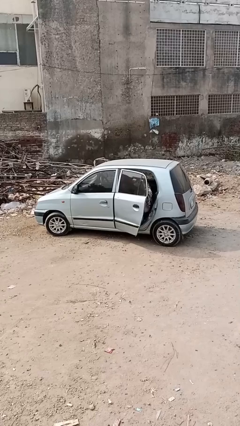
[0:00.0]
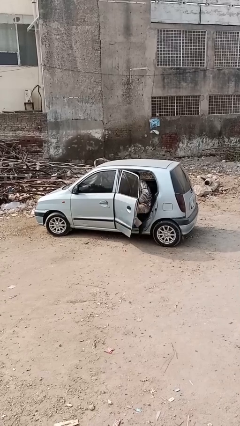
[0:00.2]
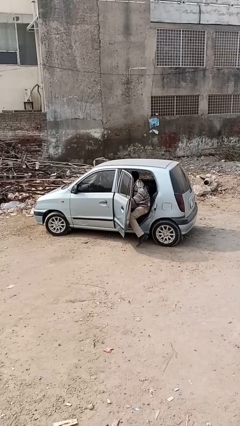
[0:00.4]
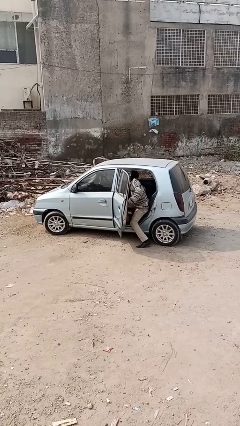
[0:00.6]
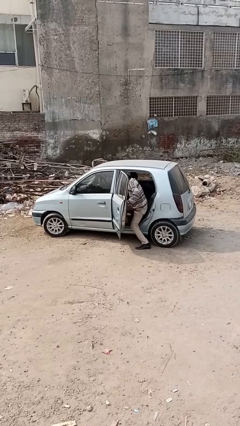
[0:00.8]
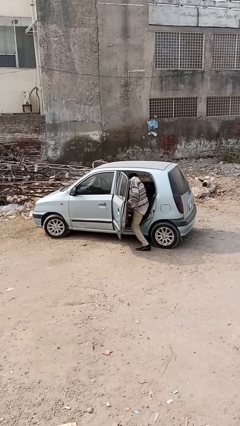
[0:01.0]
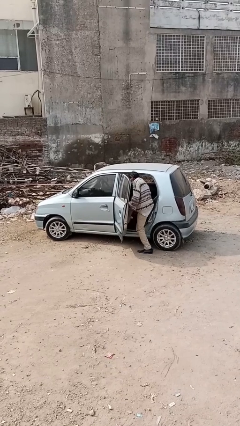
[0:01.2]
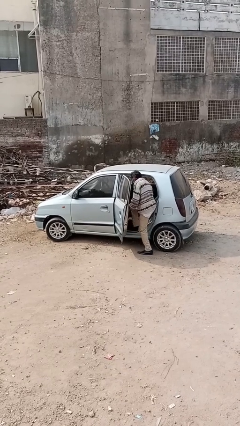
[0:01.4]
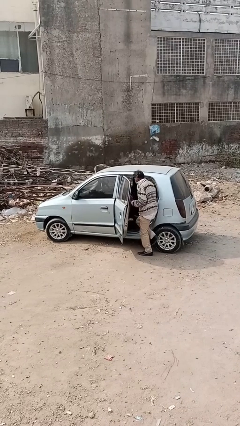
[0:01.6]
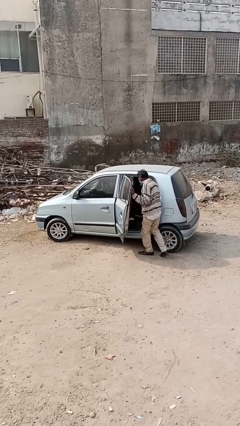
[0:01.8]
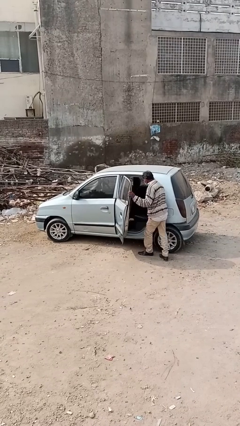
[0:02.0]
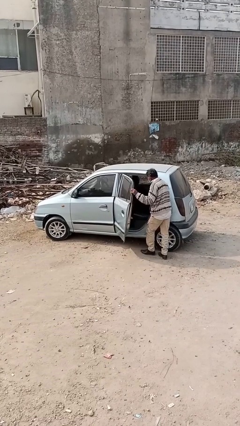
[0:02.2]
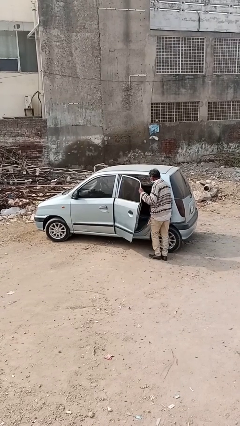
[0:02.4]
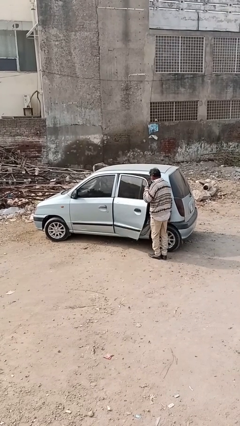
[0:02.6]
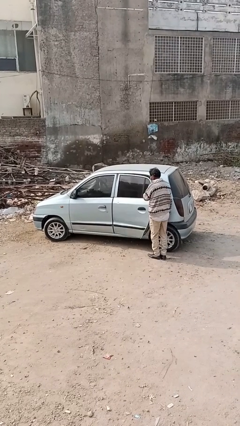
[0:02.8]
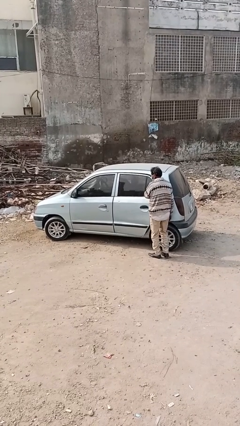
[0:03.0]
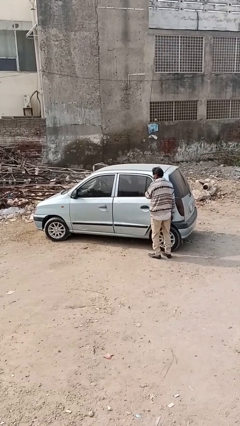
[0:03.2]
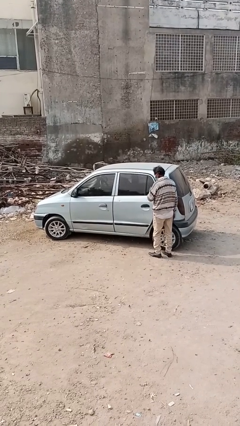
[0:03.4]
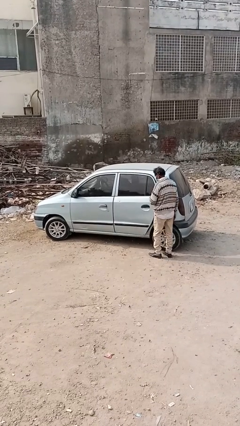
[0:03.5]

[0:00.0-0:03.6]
car drops off person

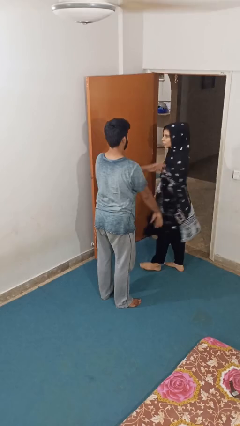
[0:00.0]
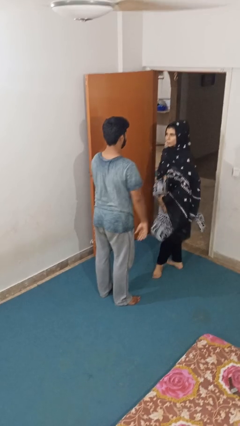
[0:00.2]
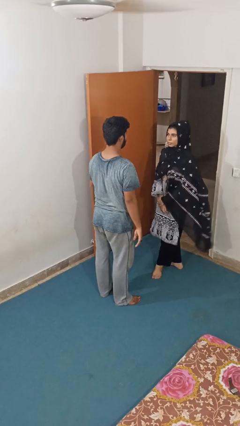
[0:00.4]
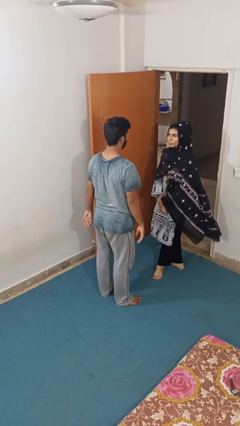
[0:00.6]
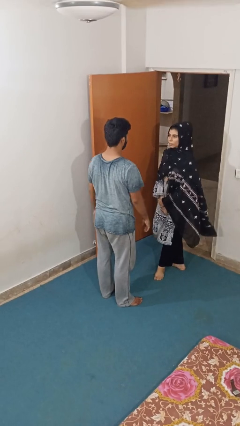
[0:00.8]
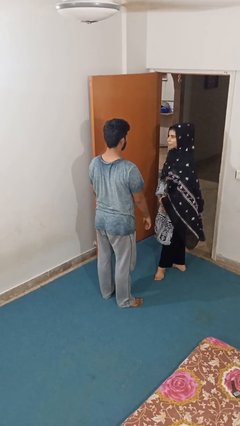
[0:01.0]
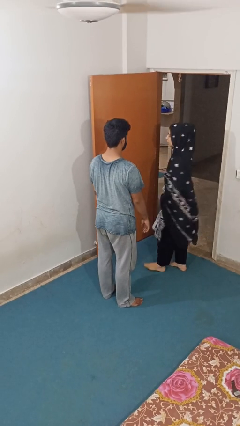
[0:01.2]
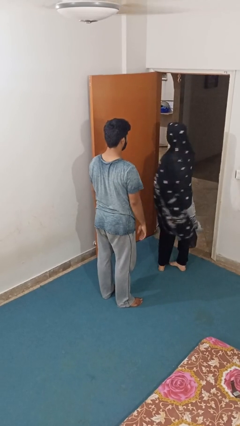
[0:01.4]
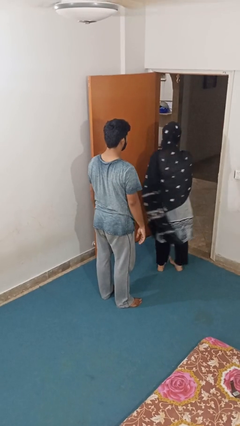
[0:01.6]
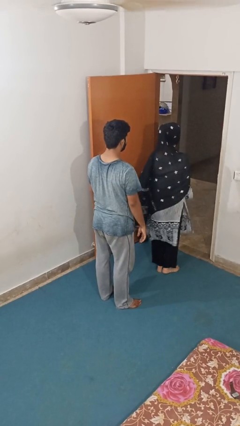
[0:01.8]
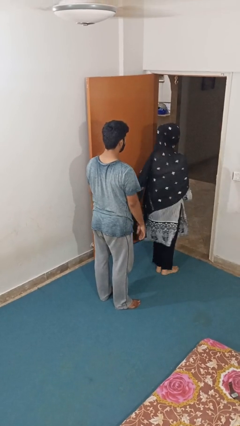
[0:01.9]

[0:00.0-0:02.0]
person spins person around

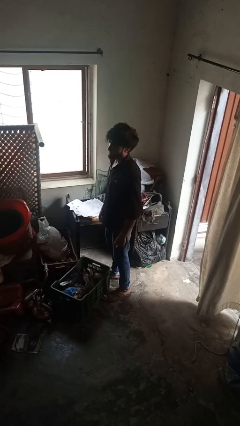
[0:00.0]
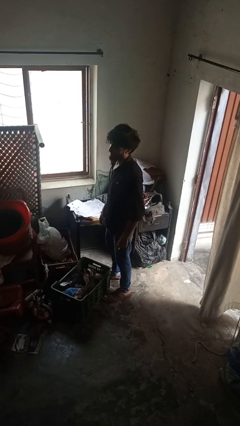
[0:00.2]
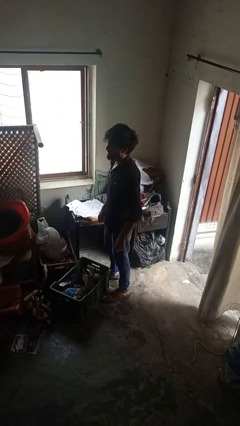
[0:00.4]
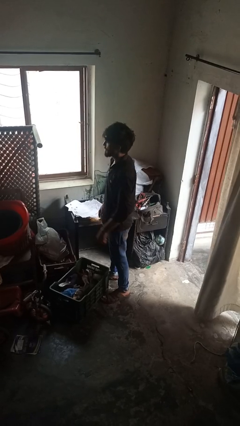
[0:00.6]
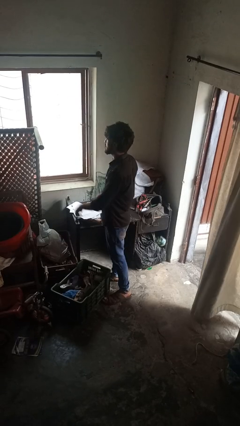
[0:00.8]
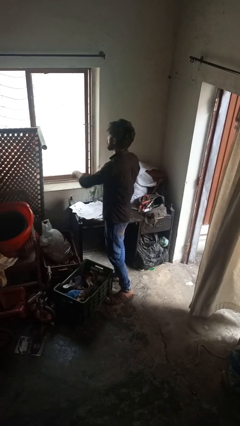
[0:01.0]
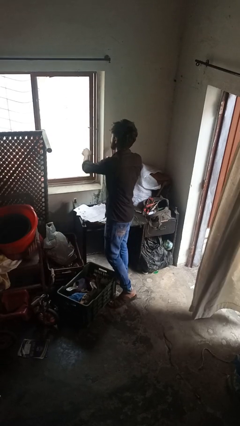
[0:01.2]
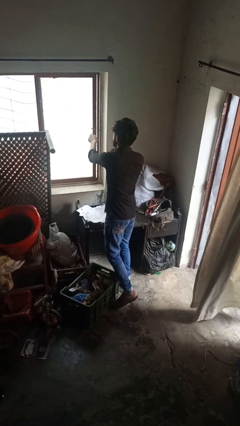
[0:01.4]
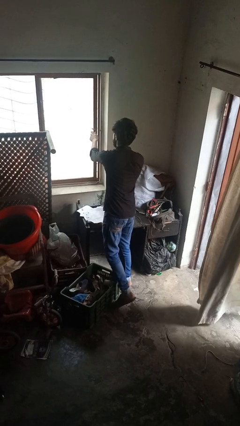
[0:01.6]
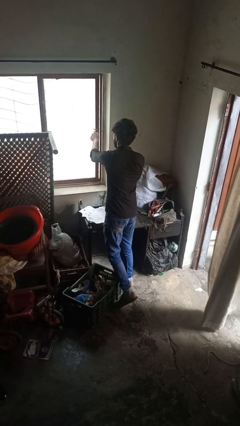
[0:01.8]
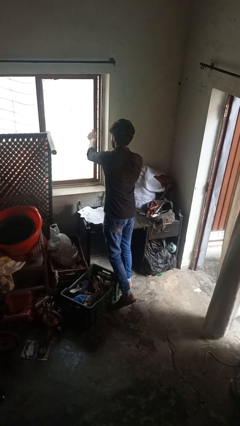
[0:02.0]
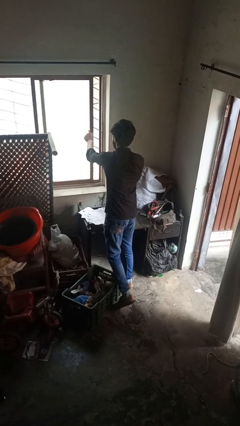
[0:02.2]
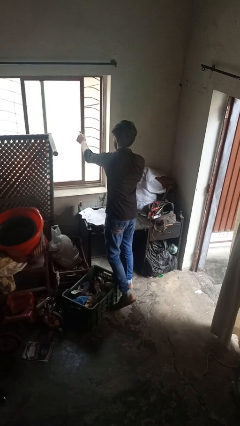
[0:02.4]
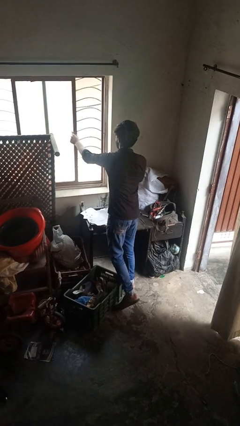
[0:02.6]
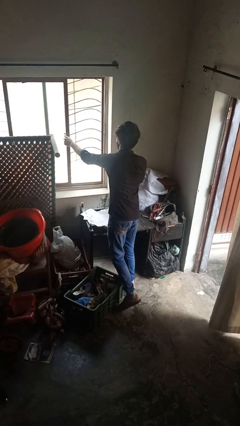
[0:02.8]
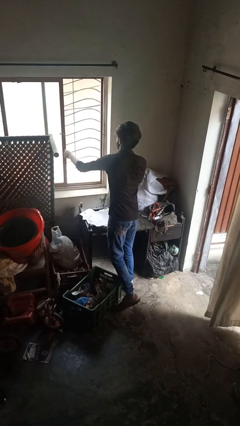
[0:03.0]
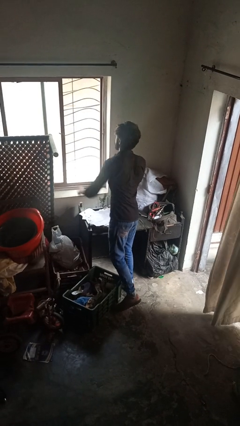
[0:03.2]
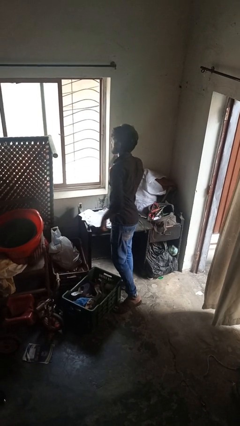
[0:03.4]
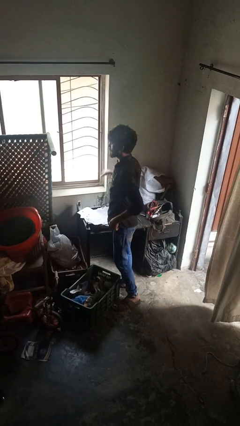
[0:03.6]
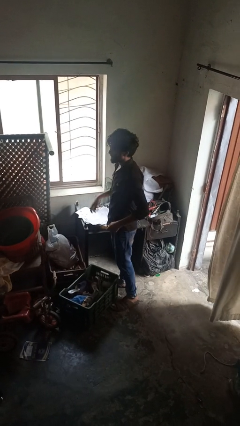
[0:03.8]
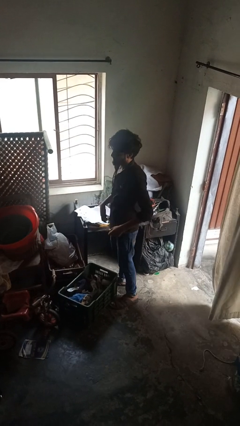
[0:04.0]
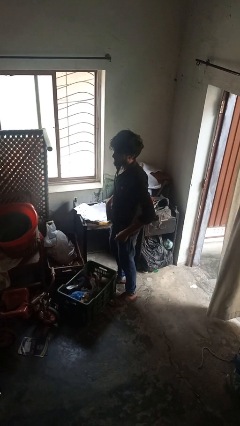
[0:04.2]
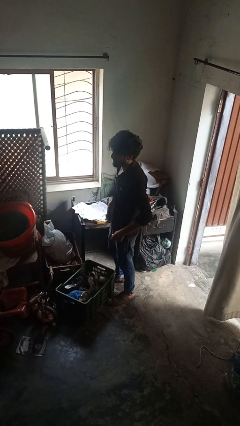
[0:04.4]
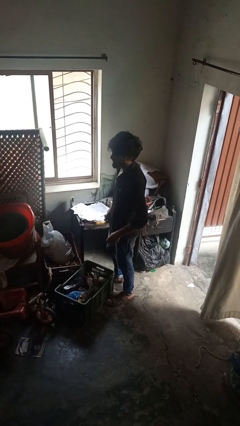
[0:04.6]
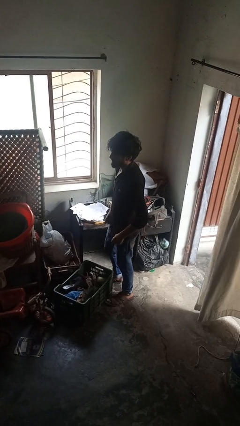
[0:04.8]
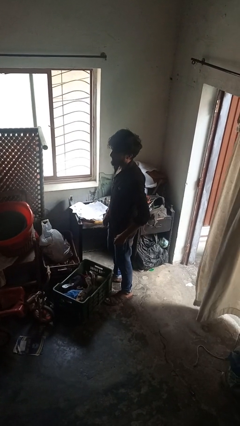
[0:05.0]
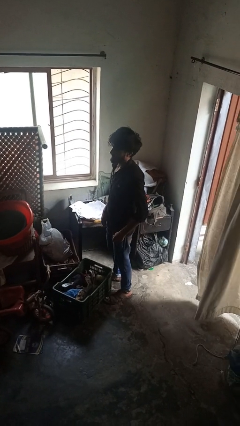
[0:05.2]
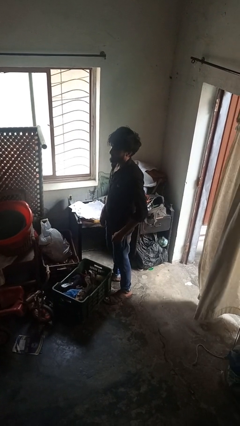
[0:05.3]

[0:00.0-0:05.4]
person opens home window

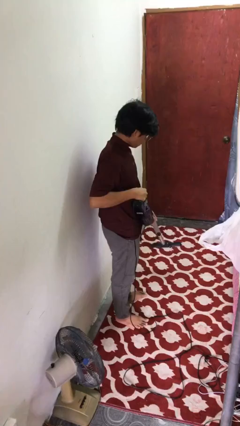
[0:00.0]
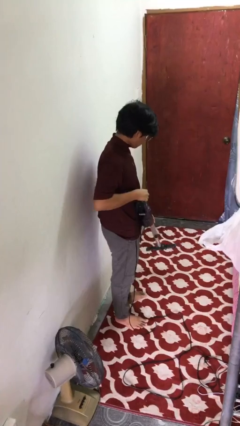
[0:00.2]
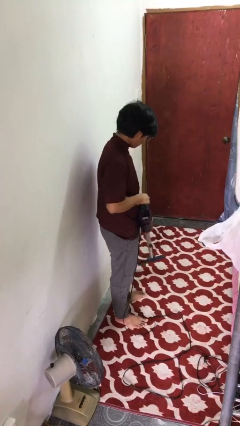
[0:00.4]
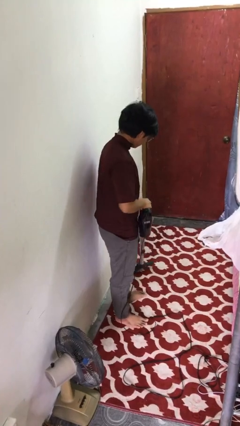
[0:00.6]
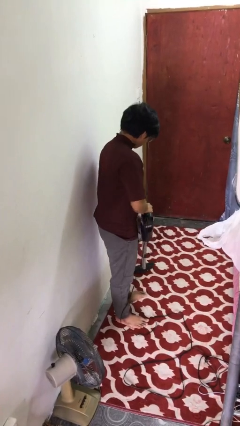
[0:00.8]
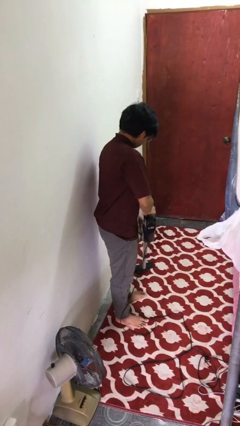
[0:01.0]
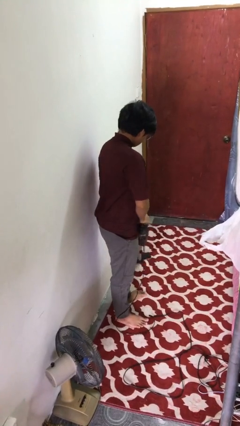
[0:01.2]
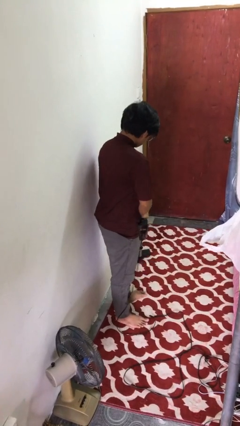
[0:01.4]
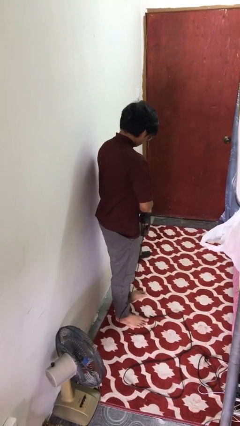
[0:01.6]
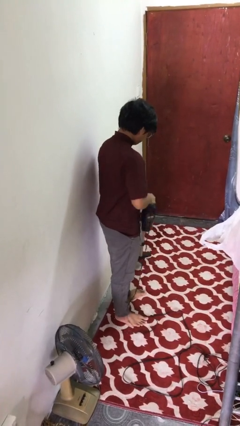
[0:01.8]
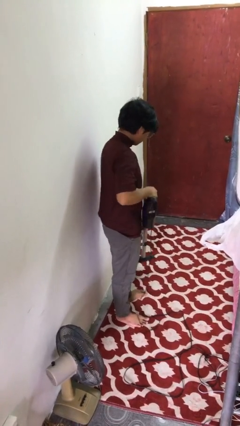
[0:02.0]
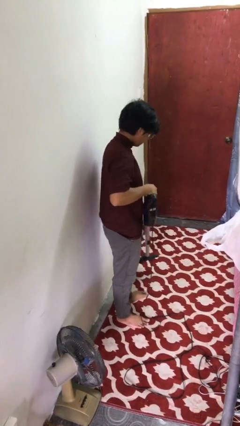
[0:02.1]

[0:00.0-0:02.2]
person vacuums carpet

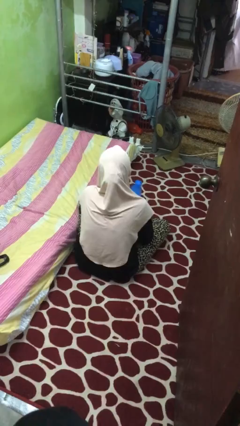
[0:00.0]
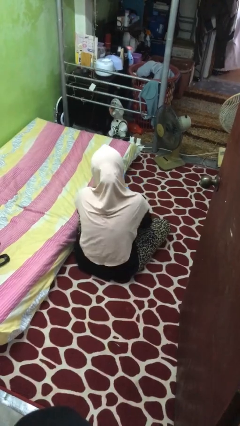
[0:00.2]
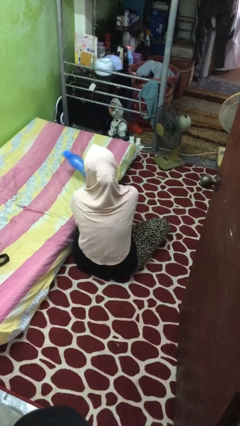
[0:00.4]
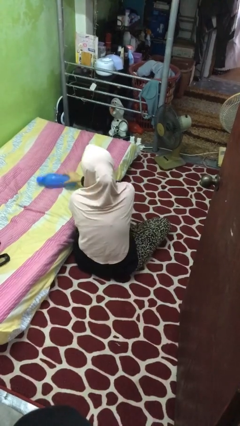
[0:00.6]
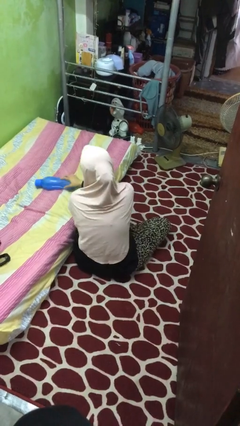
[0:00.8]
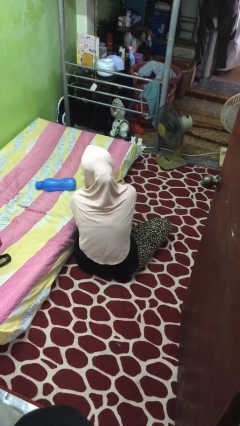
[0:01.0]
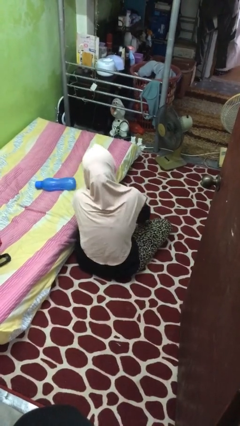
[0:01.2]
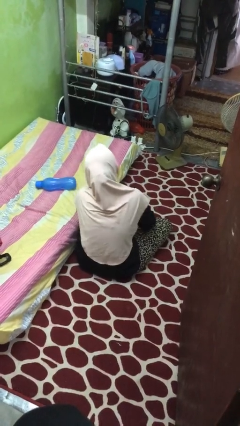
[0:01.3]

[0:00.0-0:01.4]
person puts down object on bed

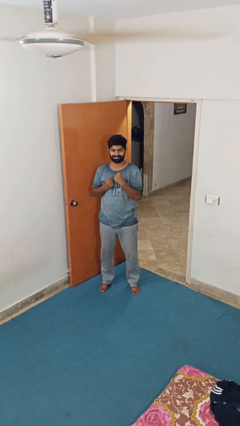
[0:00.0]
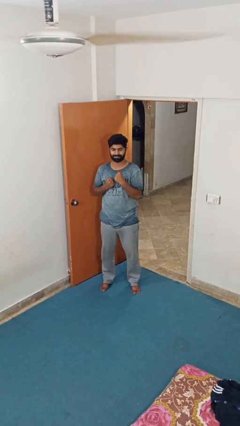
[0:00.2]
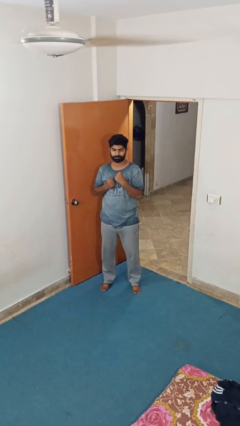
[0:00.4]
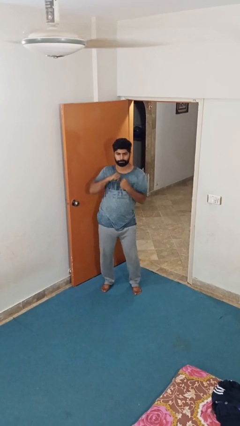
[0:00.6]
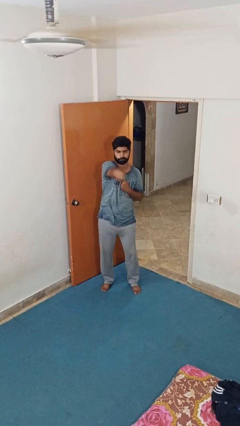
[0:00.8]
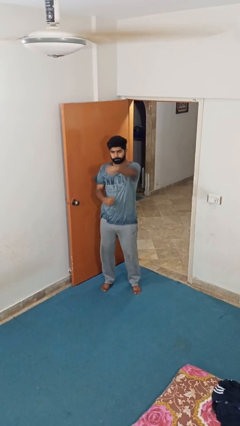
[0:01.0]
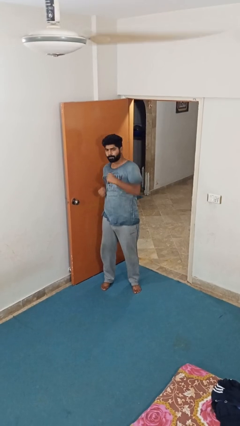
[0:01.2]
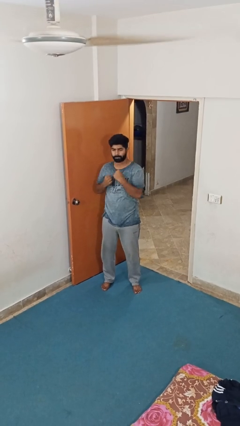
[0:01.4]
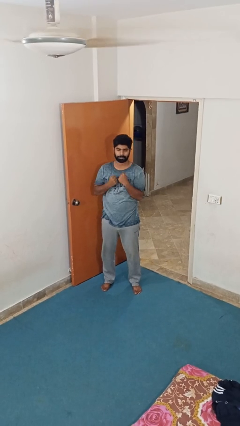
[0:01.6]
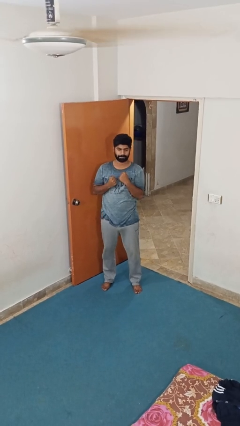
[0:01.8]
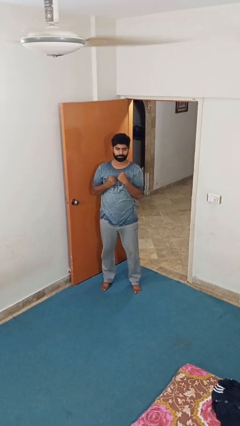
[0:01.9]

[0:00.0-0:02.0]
person punches

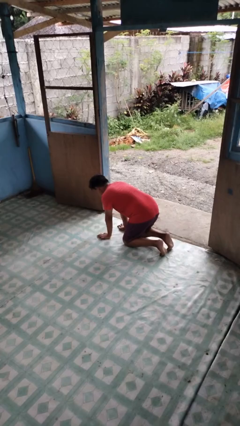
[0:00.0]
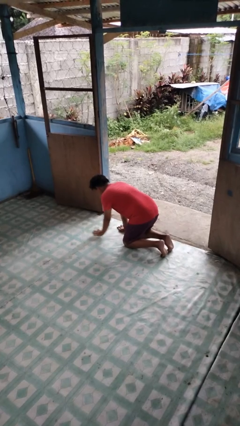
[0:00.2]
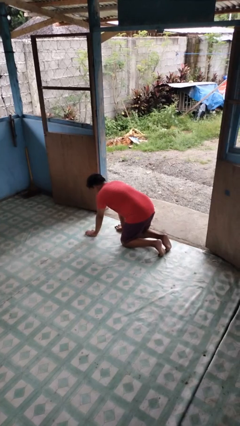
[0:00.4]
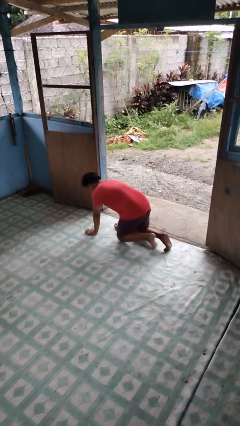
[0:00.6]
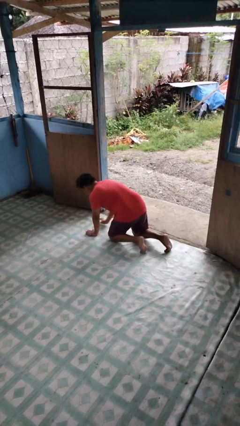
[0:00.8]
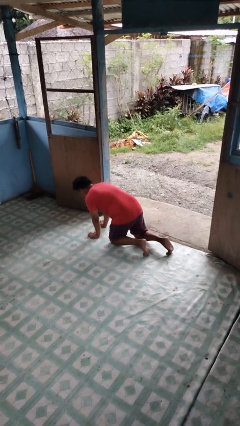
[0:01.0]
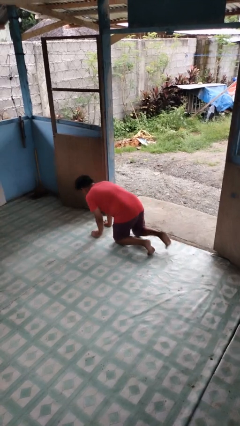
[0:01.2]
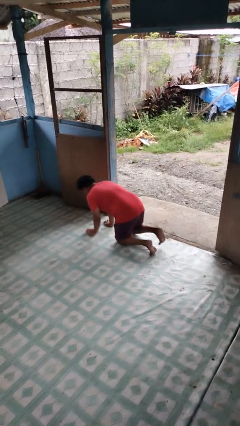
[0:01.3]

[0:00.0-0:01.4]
person crawls
